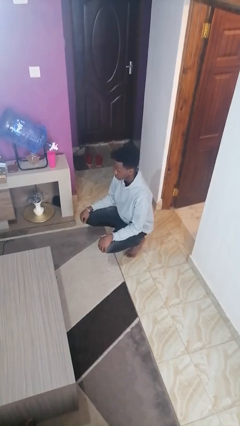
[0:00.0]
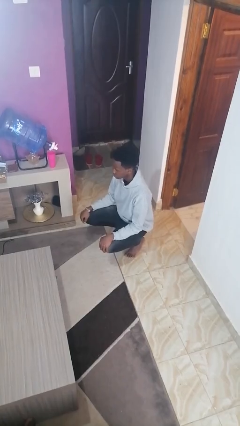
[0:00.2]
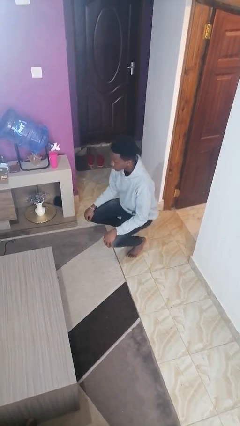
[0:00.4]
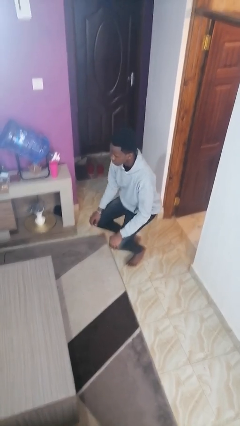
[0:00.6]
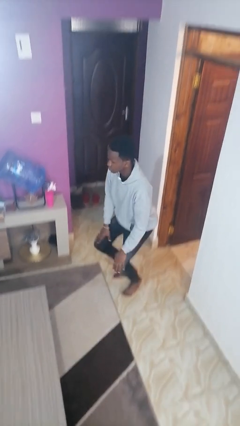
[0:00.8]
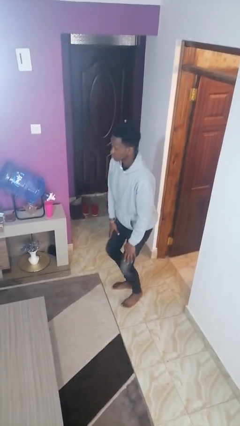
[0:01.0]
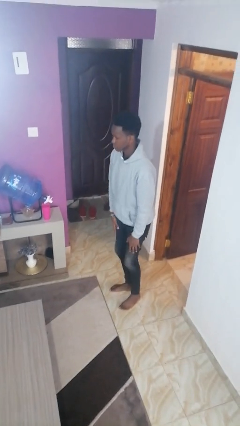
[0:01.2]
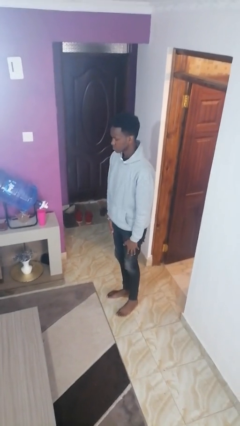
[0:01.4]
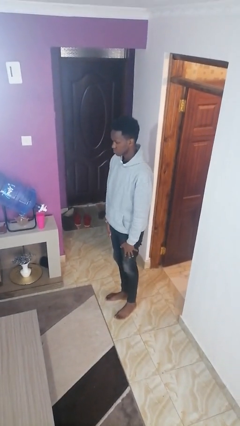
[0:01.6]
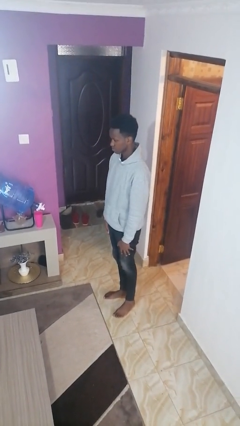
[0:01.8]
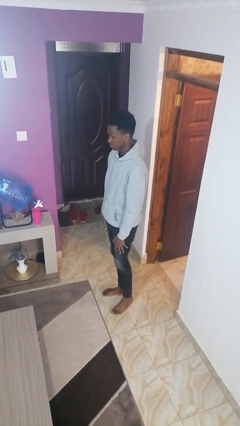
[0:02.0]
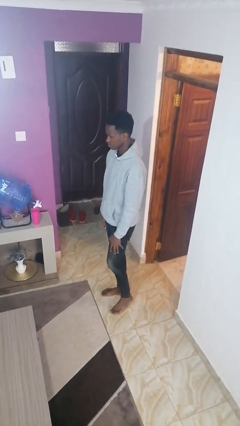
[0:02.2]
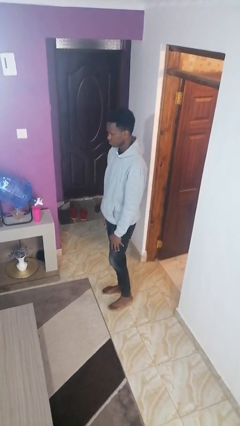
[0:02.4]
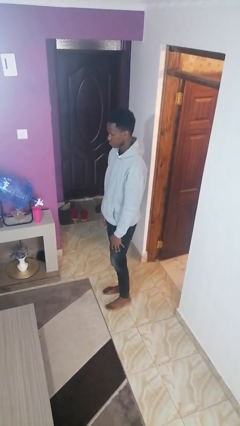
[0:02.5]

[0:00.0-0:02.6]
person stands up

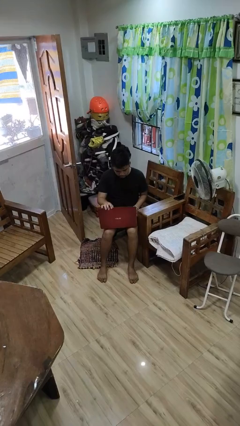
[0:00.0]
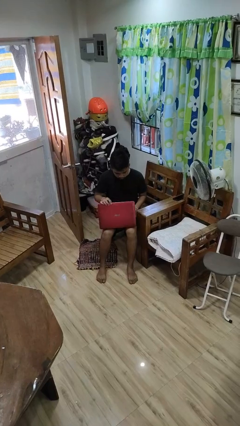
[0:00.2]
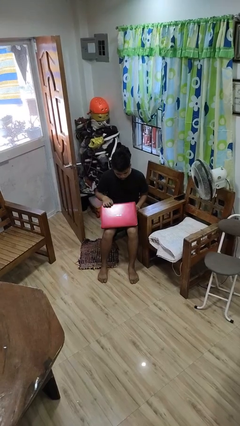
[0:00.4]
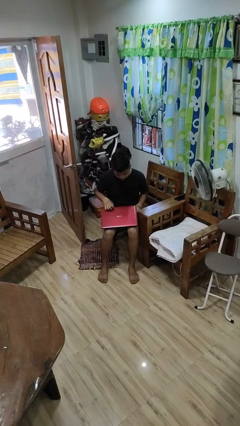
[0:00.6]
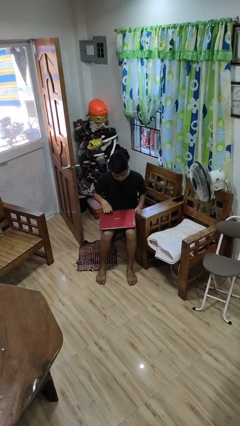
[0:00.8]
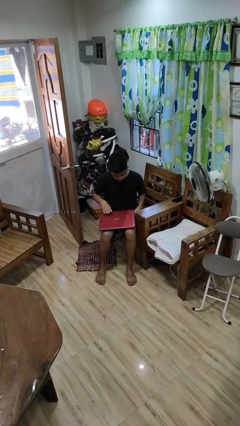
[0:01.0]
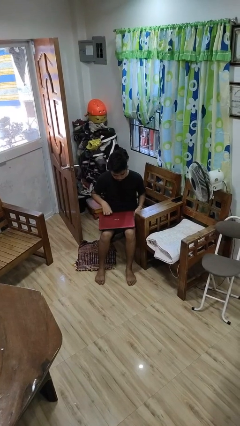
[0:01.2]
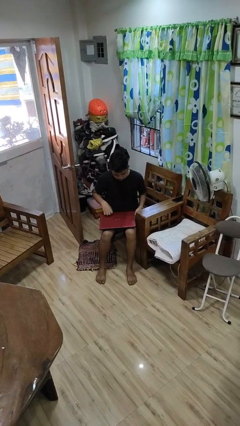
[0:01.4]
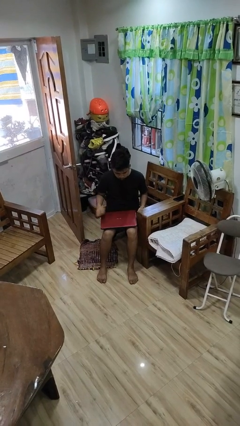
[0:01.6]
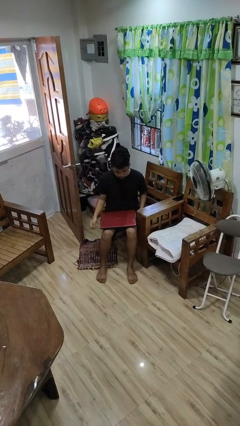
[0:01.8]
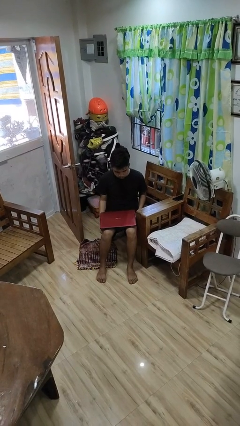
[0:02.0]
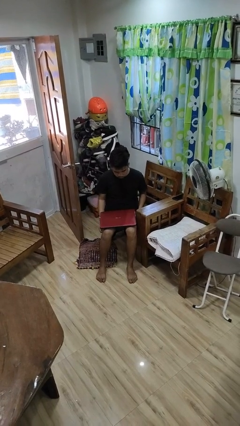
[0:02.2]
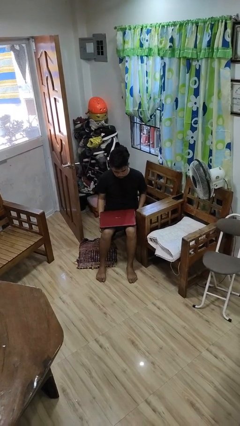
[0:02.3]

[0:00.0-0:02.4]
person closes laptop

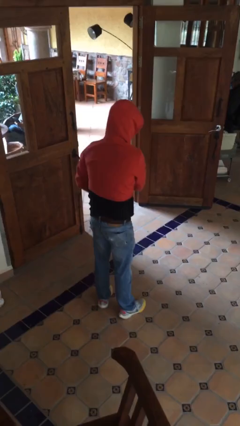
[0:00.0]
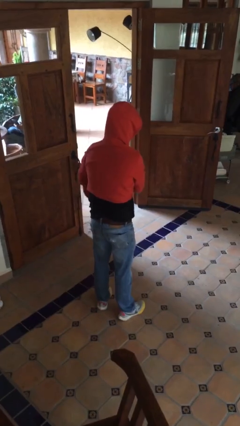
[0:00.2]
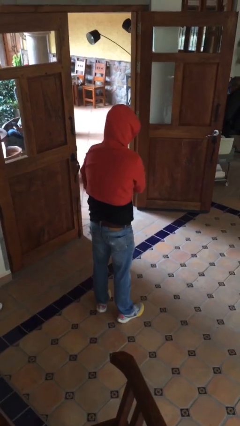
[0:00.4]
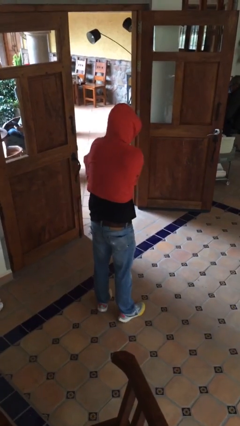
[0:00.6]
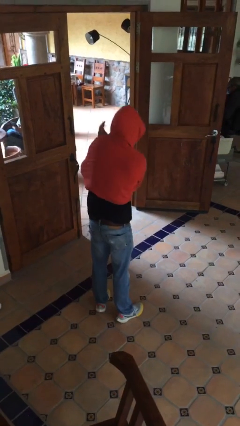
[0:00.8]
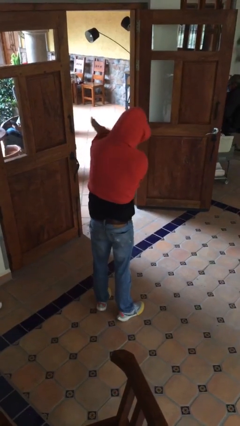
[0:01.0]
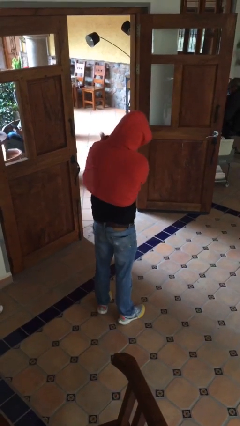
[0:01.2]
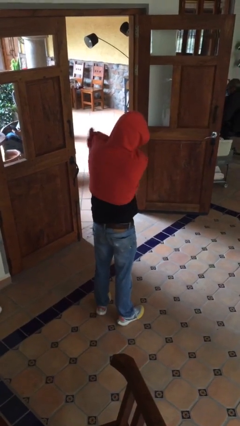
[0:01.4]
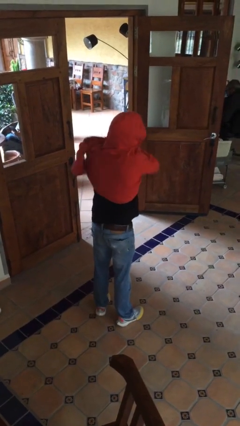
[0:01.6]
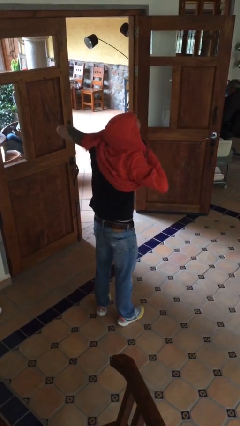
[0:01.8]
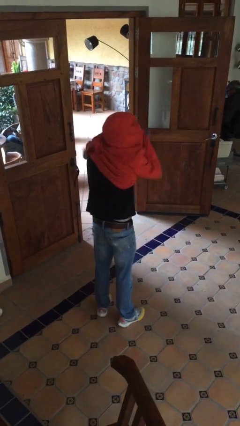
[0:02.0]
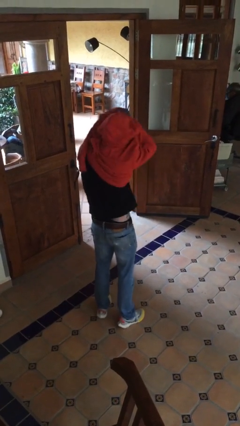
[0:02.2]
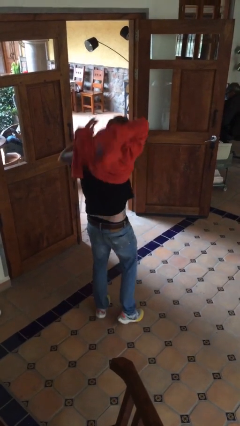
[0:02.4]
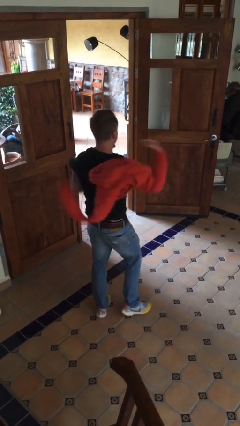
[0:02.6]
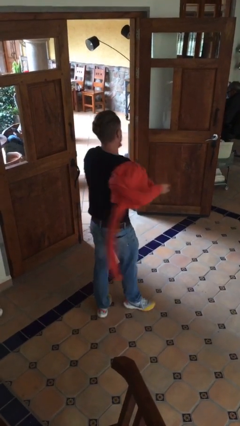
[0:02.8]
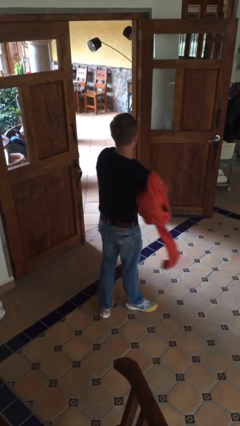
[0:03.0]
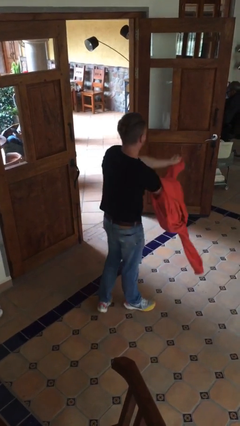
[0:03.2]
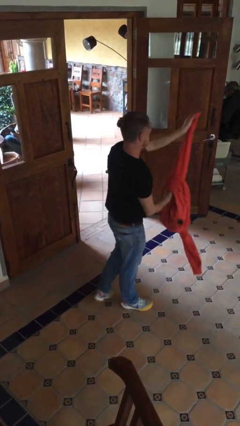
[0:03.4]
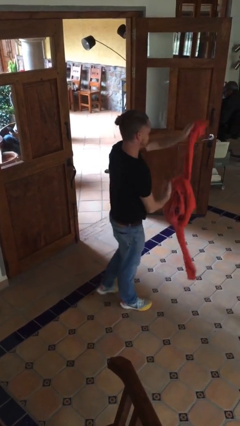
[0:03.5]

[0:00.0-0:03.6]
person takes off hoodie

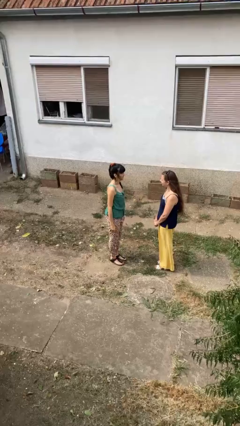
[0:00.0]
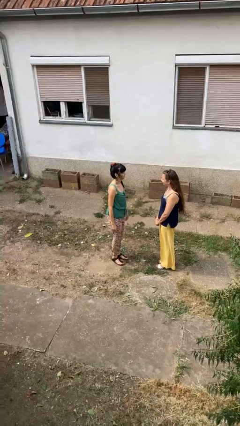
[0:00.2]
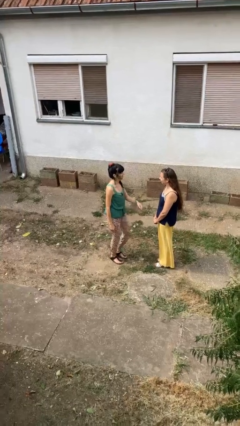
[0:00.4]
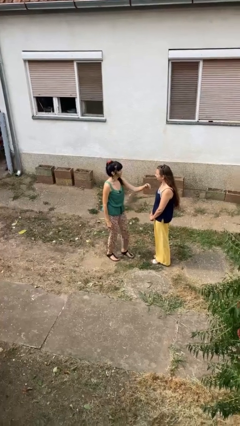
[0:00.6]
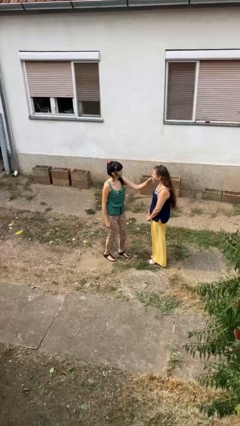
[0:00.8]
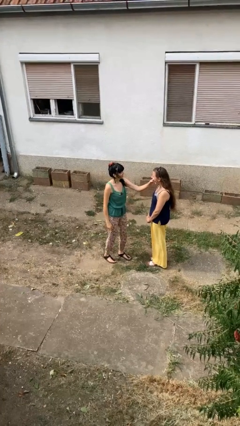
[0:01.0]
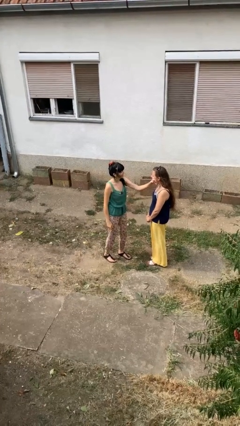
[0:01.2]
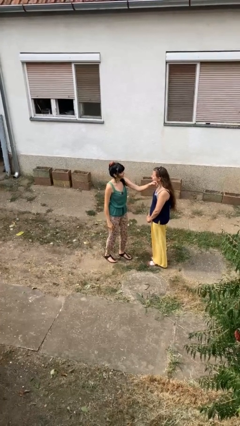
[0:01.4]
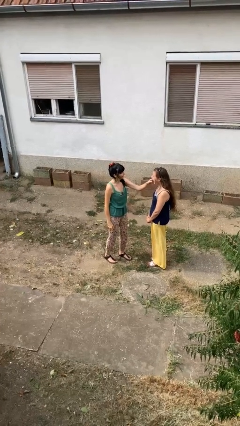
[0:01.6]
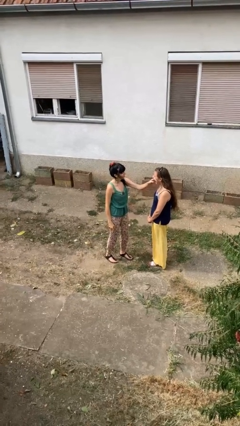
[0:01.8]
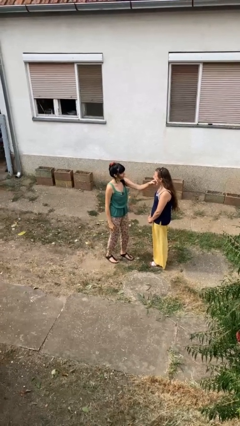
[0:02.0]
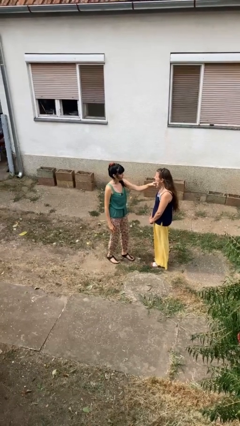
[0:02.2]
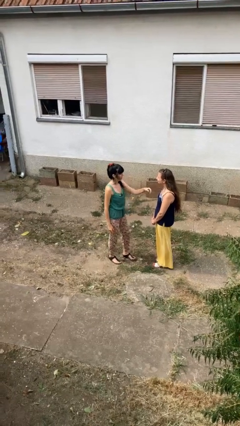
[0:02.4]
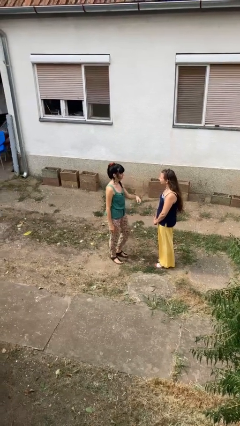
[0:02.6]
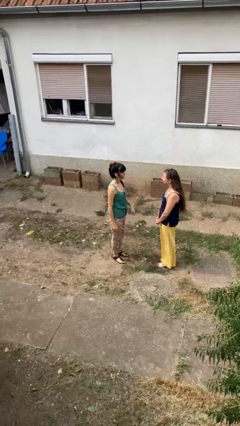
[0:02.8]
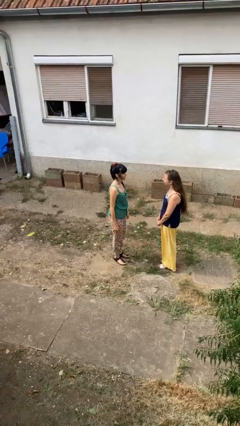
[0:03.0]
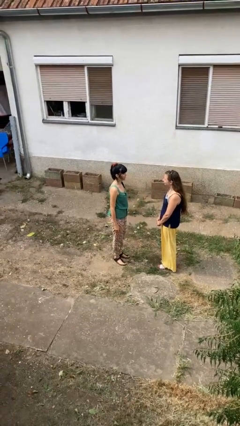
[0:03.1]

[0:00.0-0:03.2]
person touches face of person

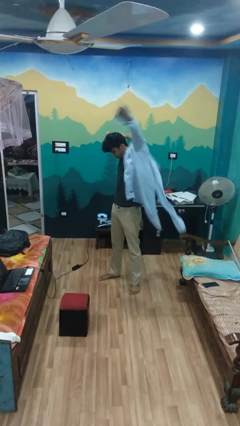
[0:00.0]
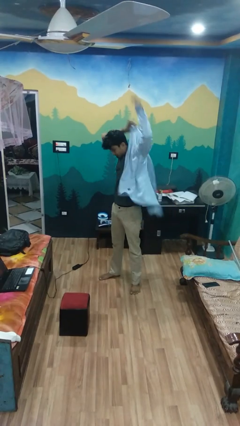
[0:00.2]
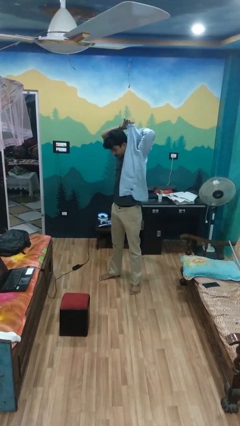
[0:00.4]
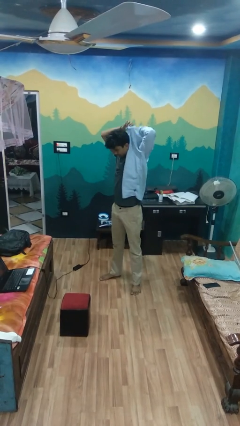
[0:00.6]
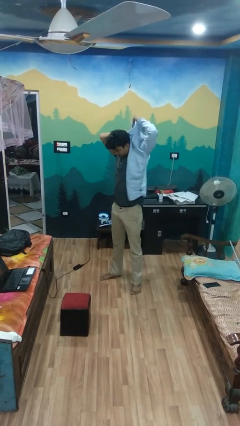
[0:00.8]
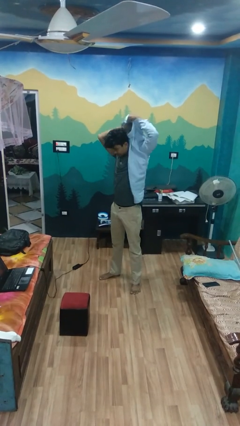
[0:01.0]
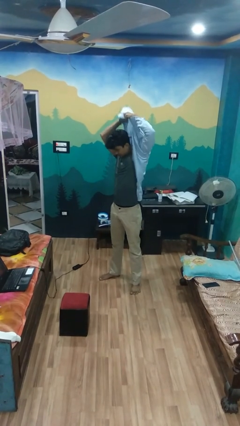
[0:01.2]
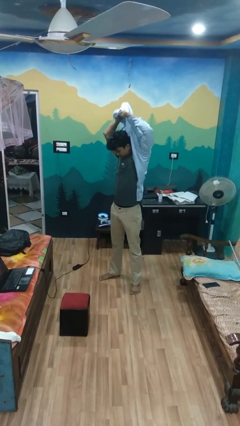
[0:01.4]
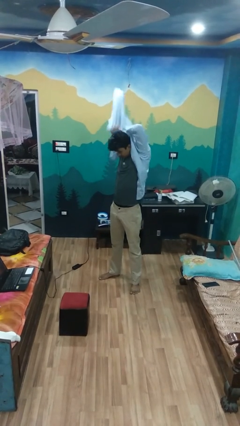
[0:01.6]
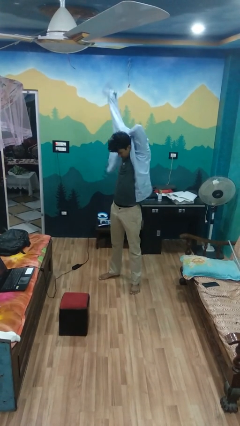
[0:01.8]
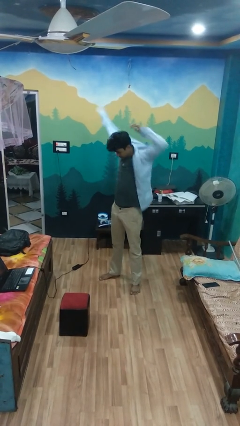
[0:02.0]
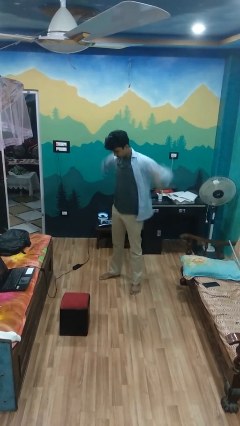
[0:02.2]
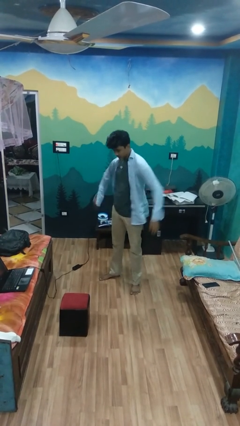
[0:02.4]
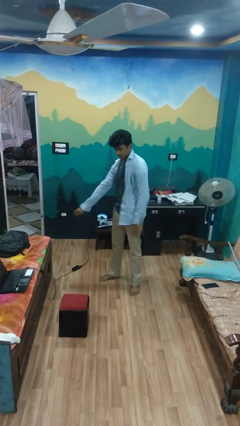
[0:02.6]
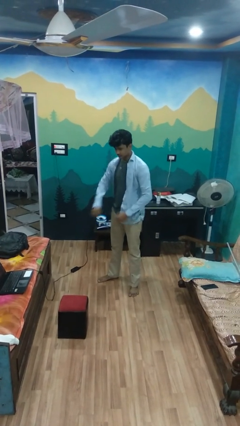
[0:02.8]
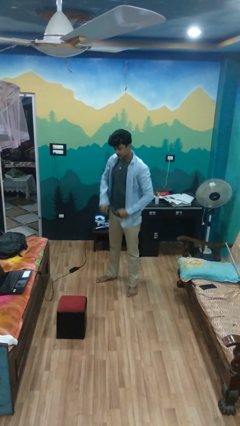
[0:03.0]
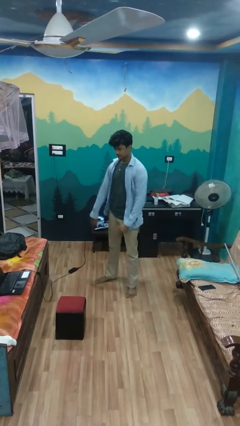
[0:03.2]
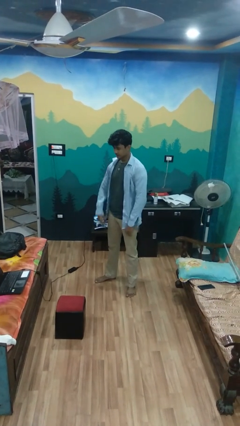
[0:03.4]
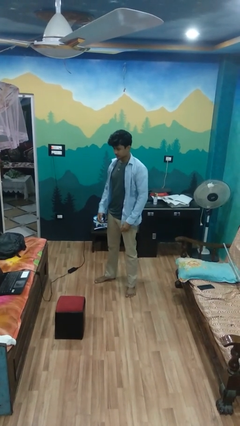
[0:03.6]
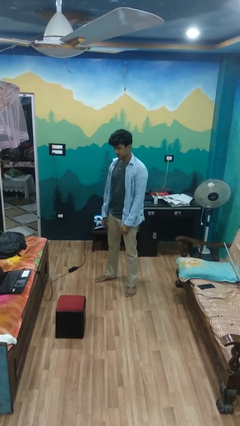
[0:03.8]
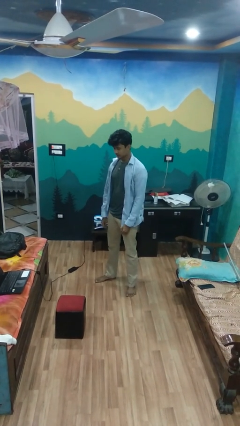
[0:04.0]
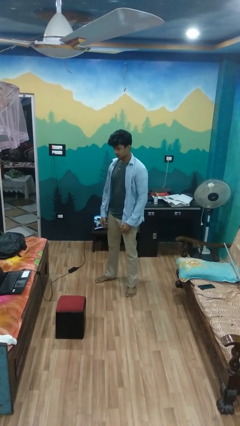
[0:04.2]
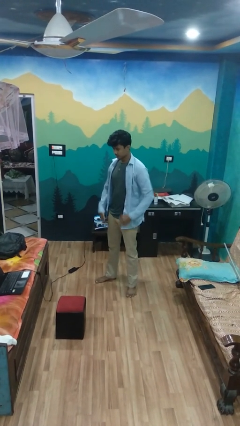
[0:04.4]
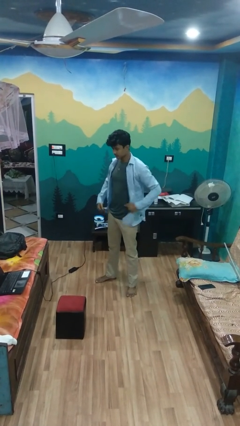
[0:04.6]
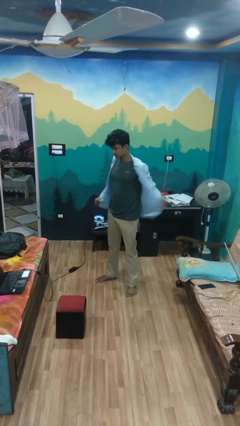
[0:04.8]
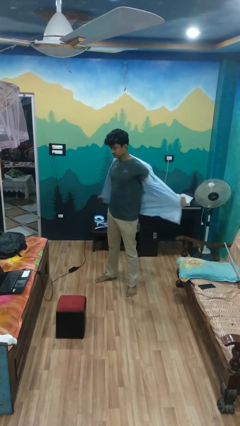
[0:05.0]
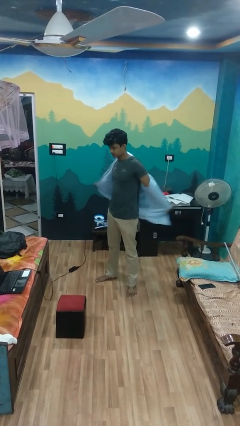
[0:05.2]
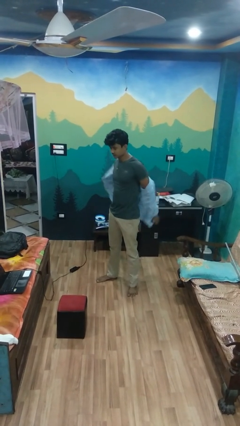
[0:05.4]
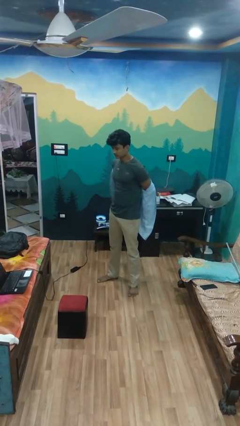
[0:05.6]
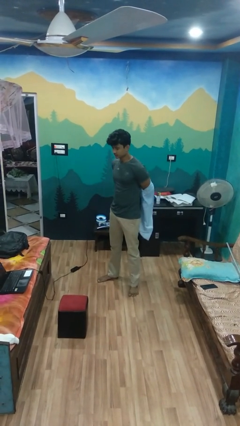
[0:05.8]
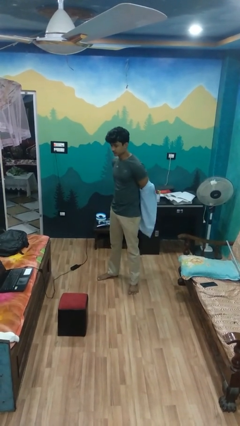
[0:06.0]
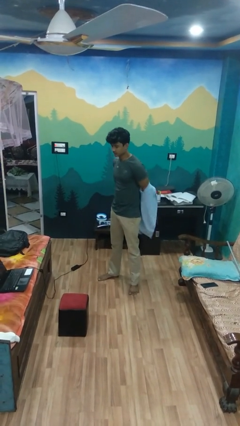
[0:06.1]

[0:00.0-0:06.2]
person puts on shirt
